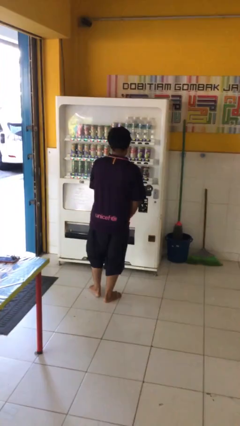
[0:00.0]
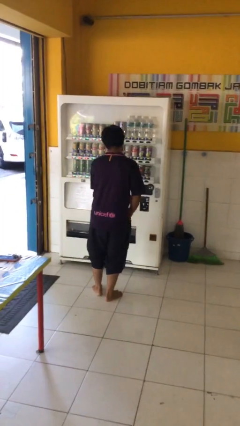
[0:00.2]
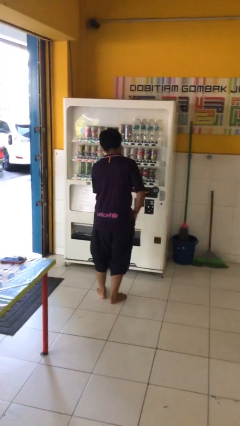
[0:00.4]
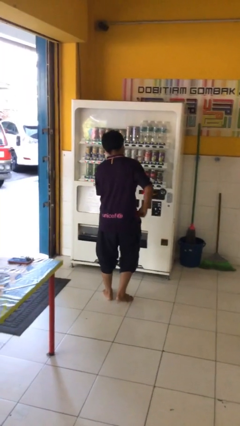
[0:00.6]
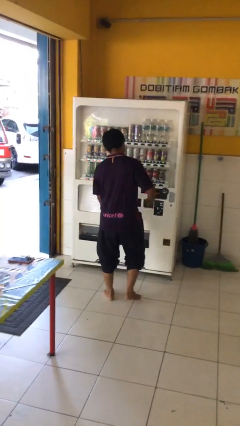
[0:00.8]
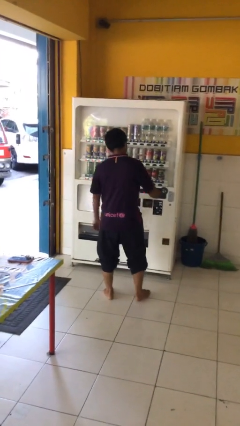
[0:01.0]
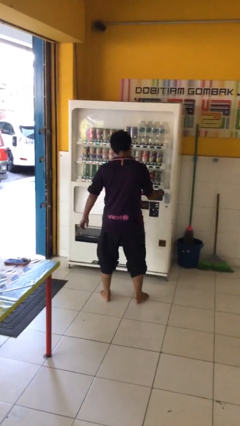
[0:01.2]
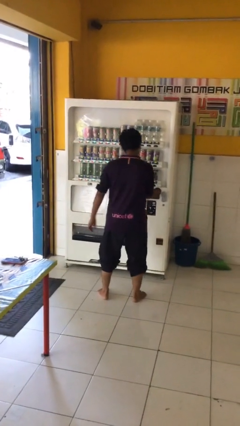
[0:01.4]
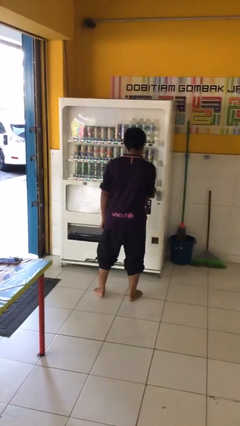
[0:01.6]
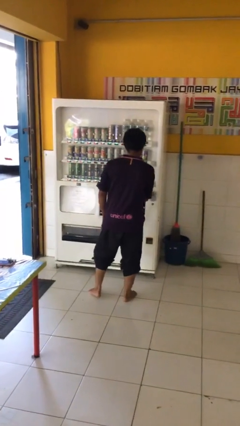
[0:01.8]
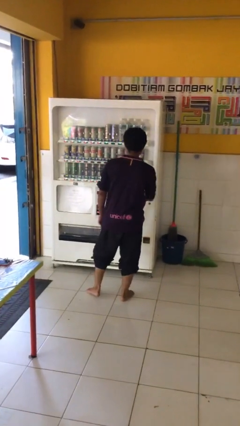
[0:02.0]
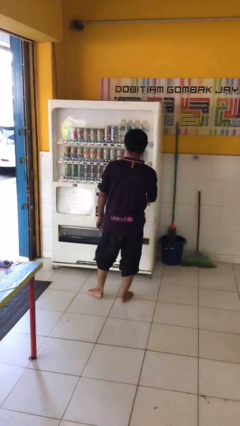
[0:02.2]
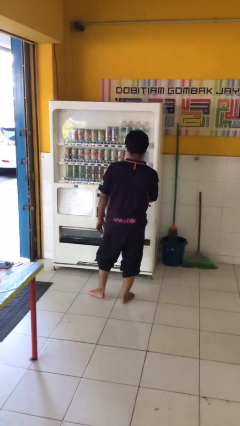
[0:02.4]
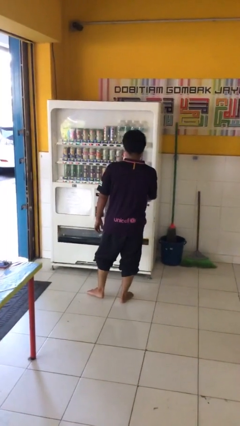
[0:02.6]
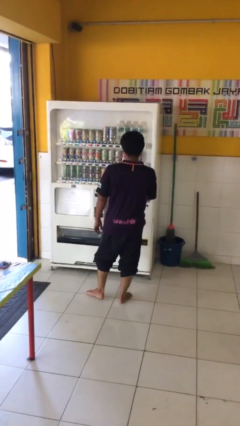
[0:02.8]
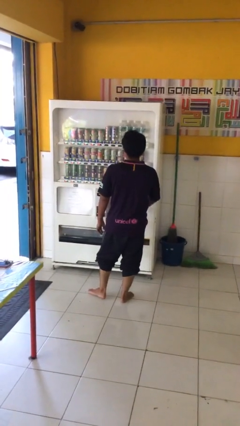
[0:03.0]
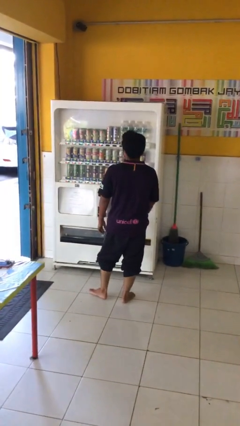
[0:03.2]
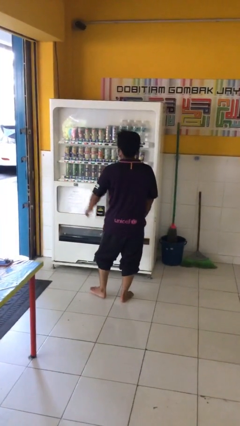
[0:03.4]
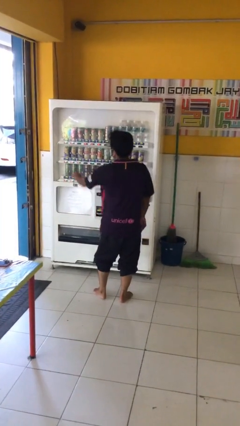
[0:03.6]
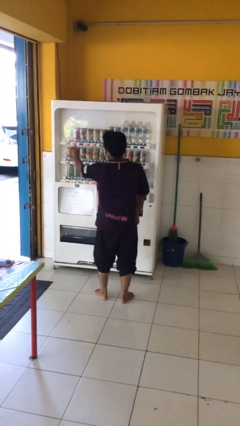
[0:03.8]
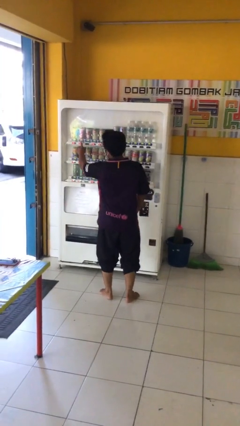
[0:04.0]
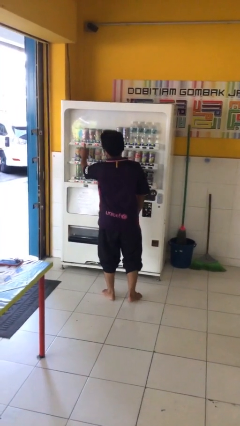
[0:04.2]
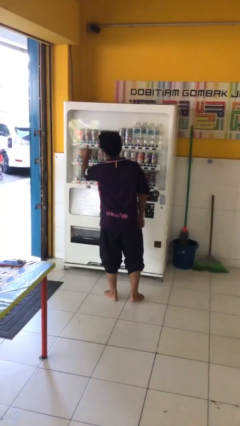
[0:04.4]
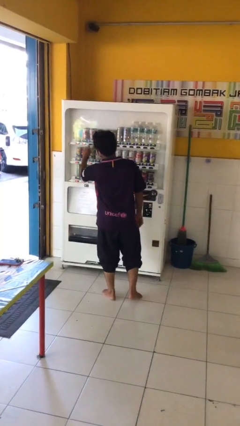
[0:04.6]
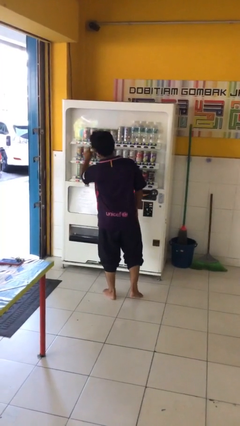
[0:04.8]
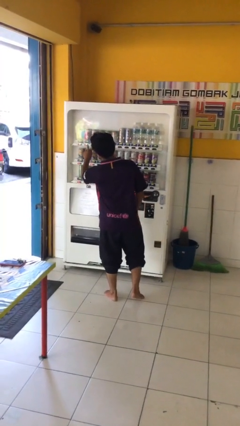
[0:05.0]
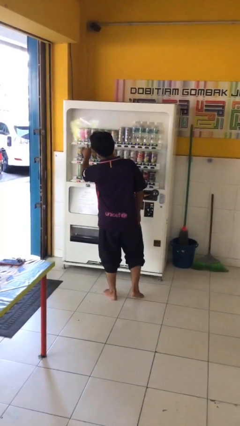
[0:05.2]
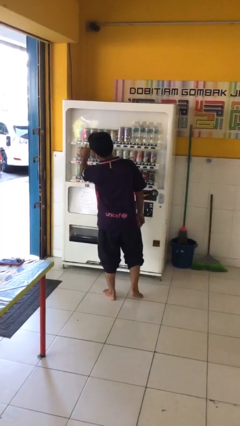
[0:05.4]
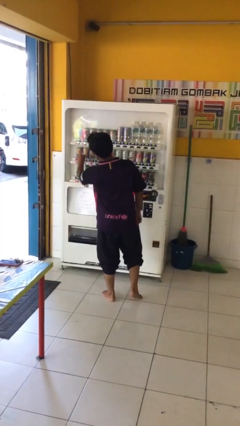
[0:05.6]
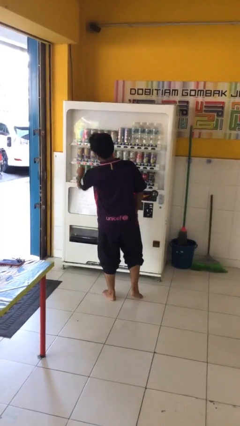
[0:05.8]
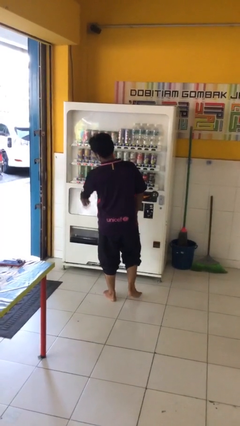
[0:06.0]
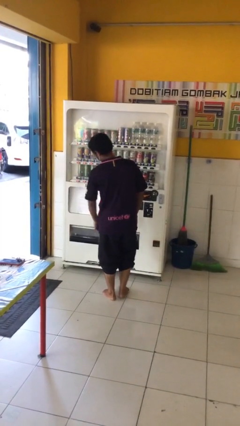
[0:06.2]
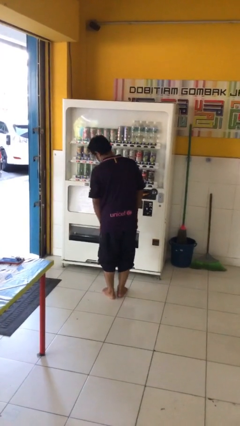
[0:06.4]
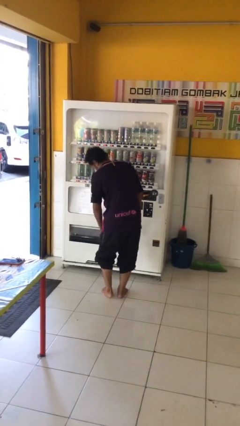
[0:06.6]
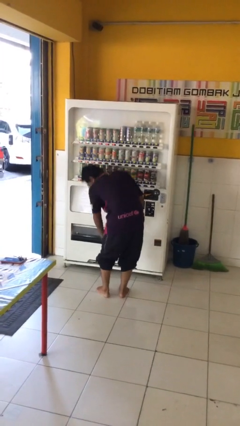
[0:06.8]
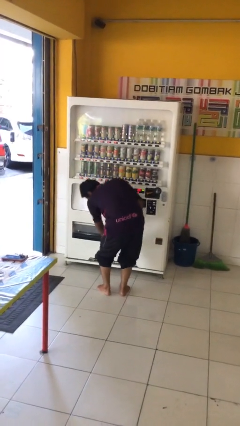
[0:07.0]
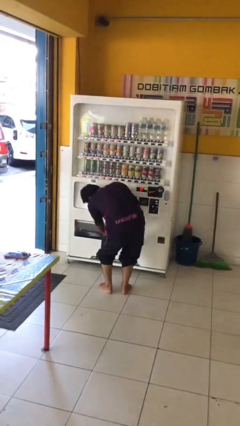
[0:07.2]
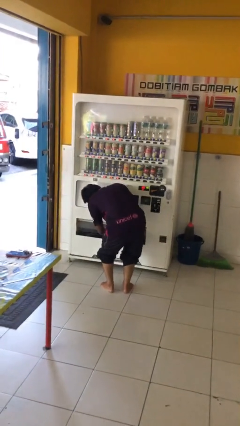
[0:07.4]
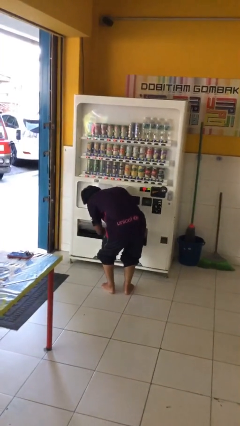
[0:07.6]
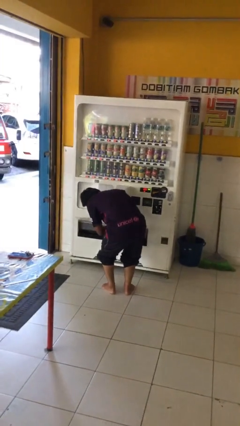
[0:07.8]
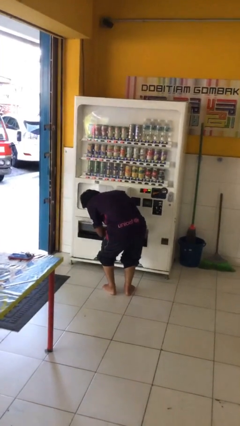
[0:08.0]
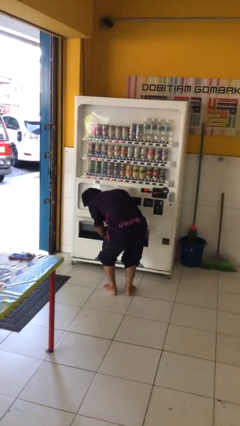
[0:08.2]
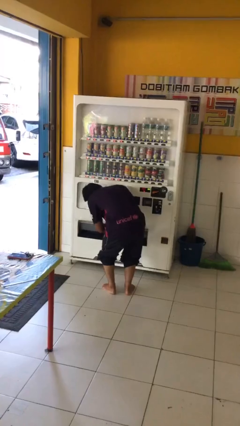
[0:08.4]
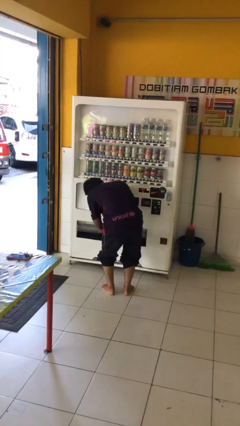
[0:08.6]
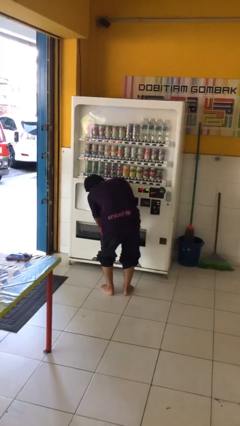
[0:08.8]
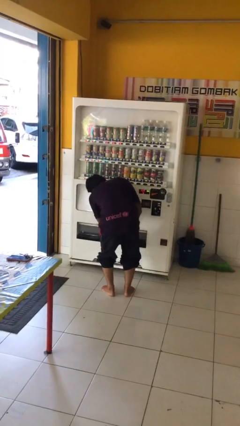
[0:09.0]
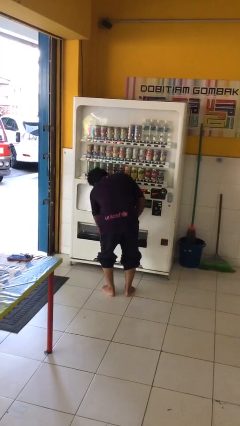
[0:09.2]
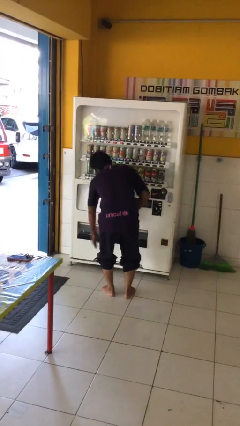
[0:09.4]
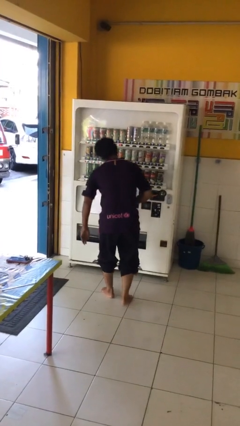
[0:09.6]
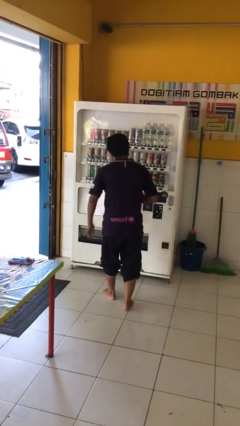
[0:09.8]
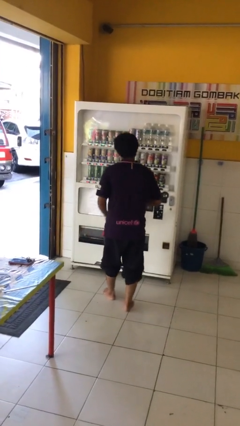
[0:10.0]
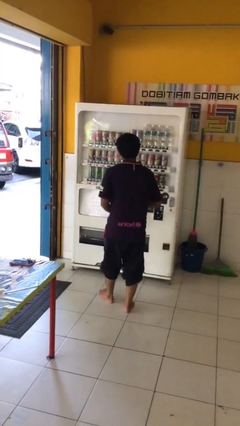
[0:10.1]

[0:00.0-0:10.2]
person purchases from machine

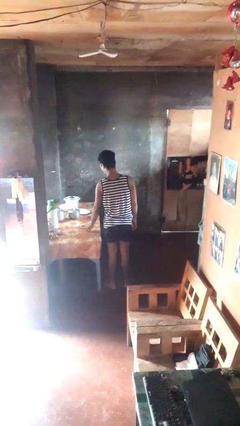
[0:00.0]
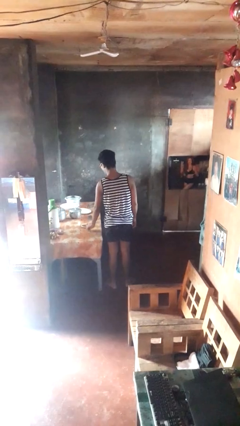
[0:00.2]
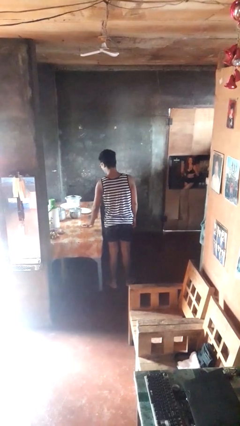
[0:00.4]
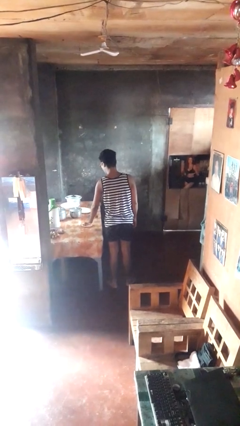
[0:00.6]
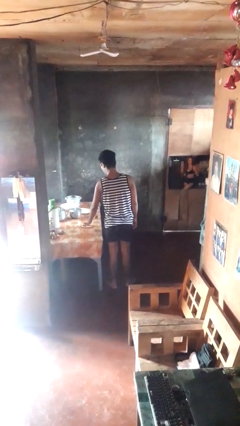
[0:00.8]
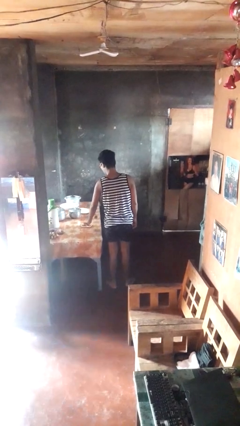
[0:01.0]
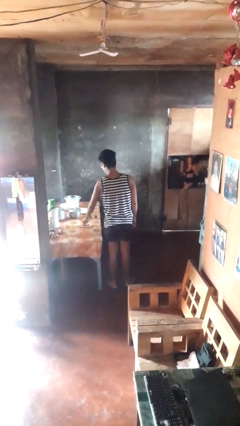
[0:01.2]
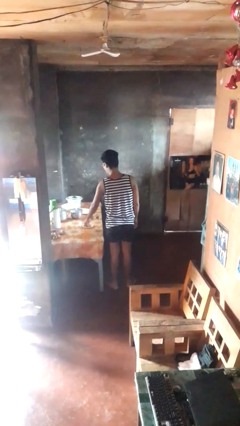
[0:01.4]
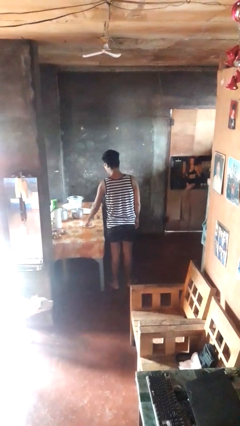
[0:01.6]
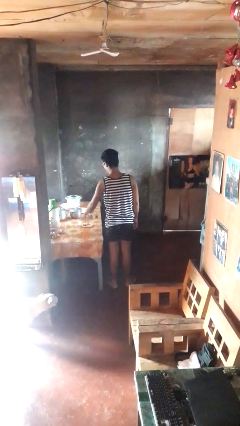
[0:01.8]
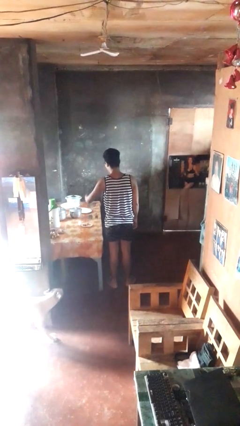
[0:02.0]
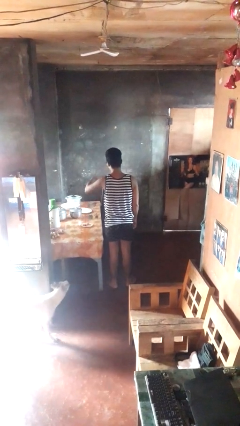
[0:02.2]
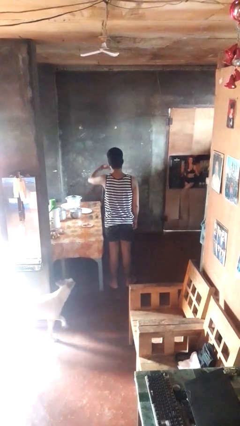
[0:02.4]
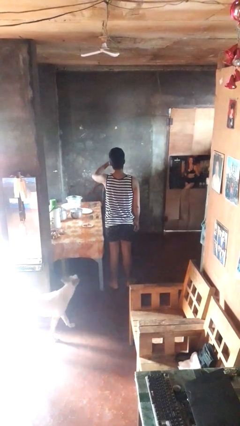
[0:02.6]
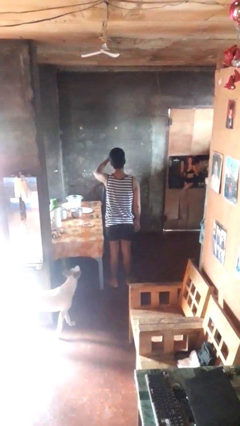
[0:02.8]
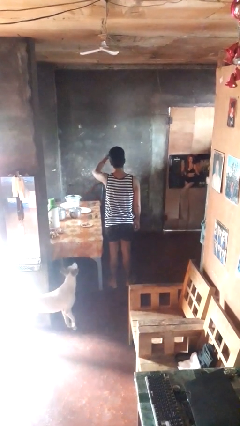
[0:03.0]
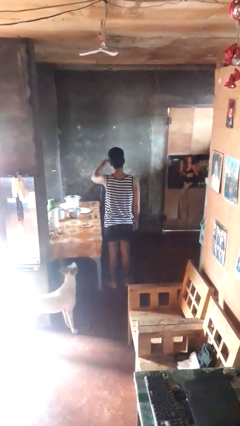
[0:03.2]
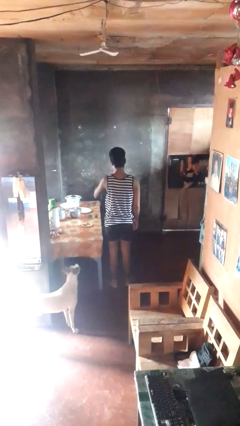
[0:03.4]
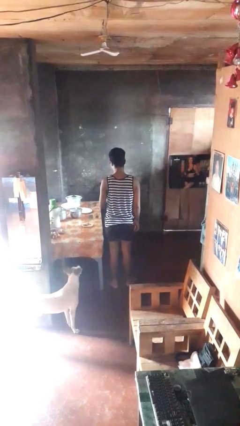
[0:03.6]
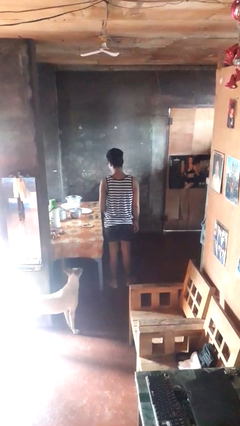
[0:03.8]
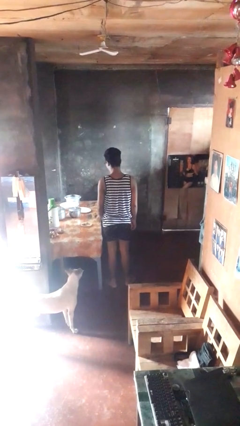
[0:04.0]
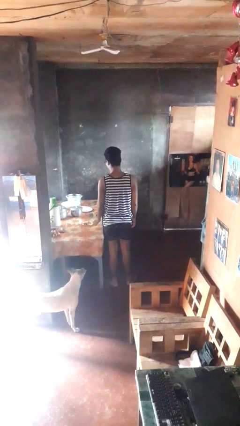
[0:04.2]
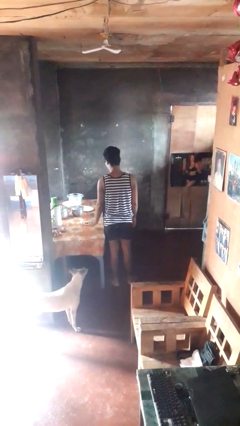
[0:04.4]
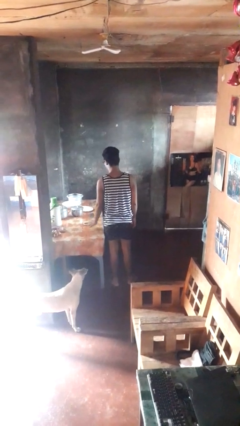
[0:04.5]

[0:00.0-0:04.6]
person eats with utensil

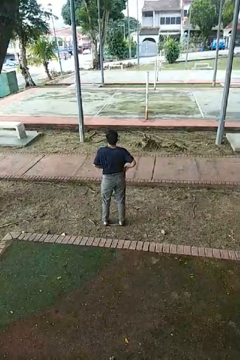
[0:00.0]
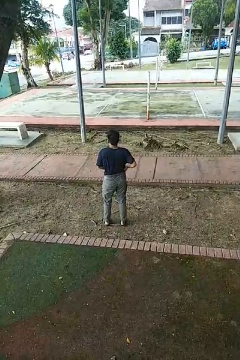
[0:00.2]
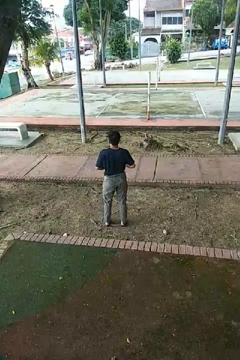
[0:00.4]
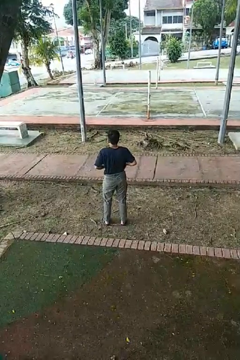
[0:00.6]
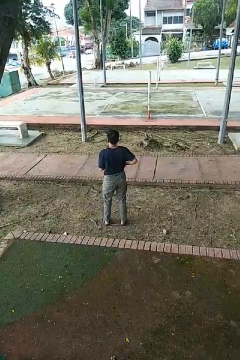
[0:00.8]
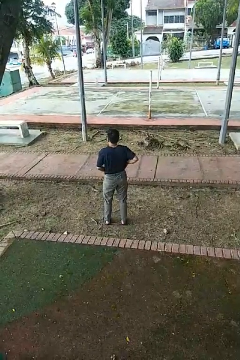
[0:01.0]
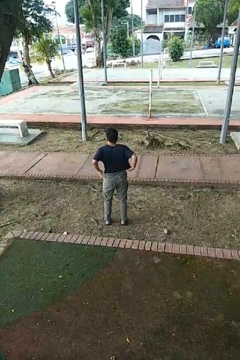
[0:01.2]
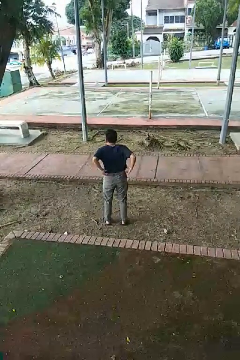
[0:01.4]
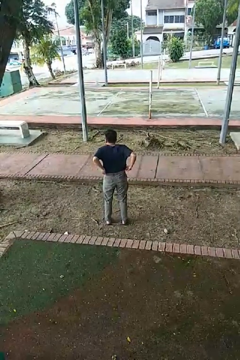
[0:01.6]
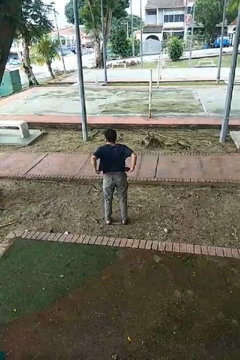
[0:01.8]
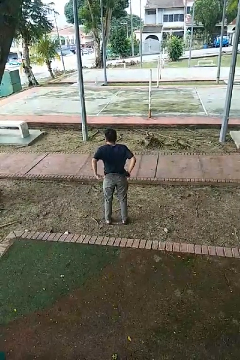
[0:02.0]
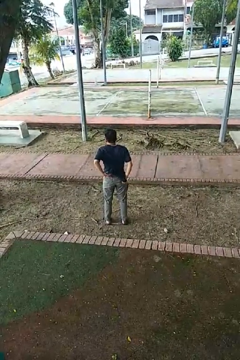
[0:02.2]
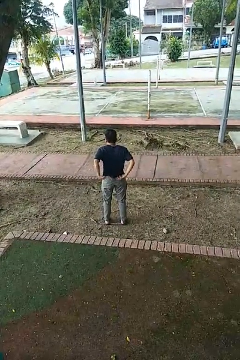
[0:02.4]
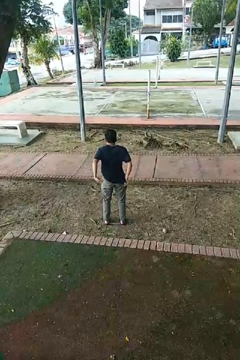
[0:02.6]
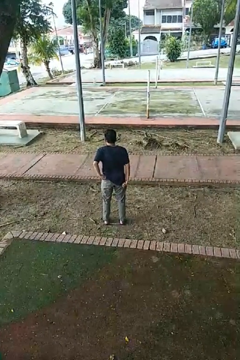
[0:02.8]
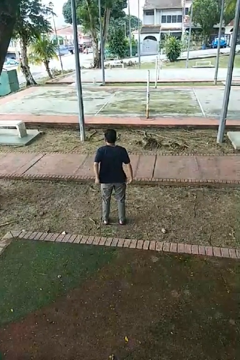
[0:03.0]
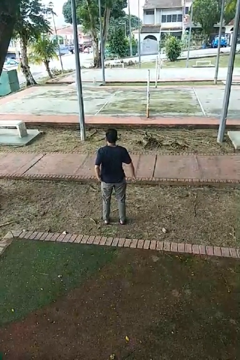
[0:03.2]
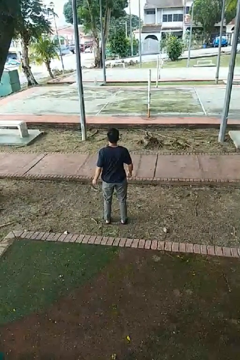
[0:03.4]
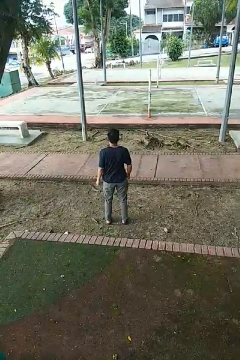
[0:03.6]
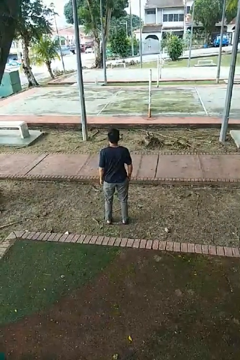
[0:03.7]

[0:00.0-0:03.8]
person untucks shirt
